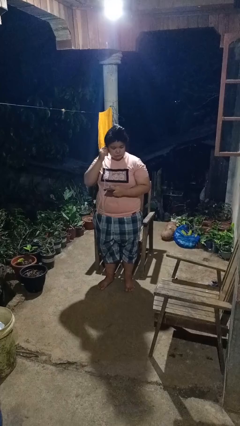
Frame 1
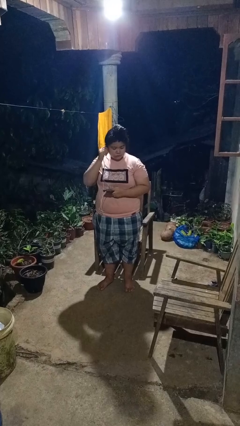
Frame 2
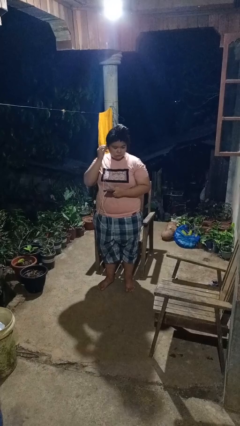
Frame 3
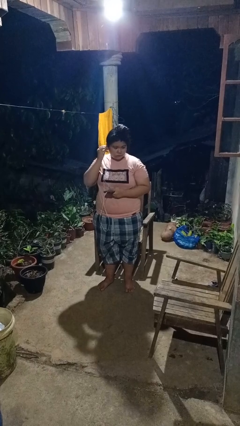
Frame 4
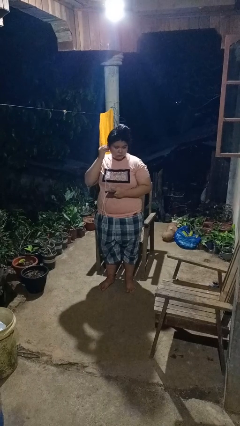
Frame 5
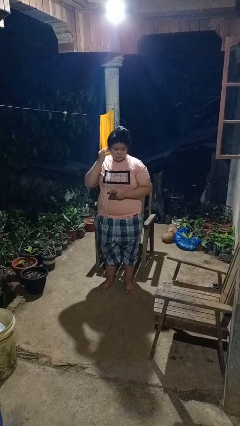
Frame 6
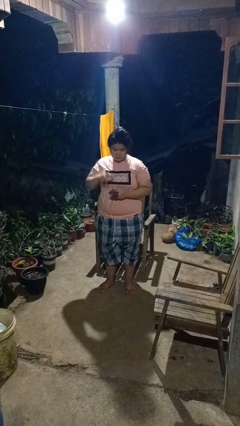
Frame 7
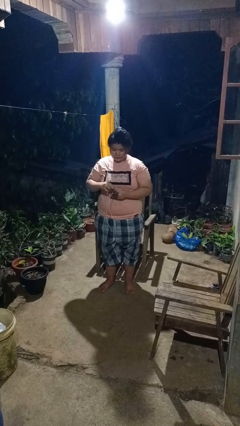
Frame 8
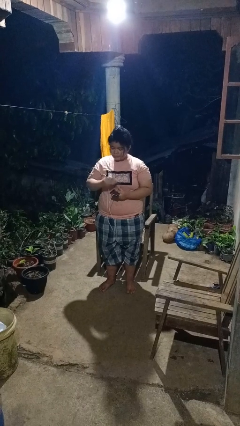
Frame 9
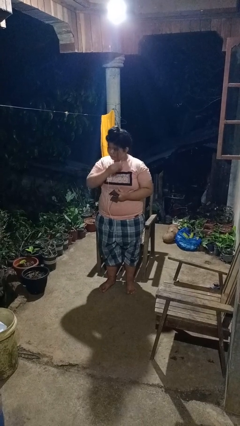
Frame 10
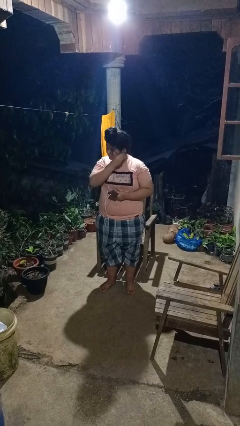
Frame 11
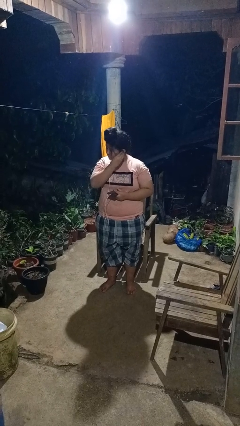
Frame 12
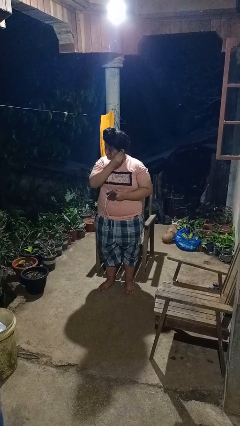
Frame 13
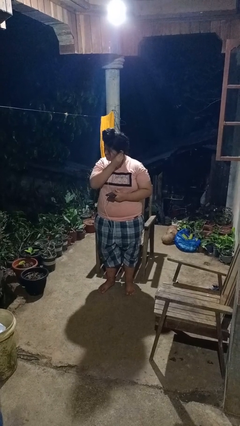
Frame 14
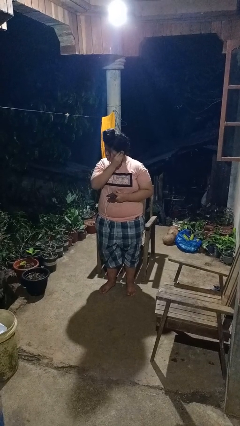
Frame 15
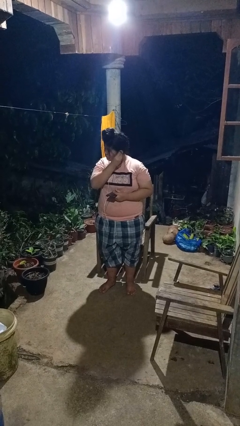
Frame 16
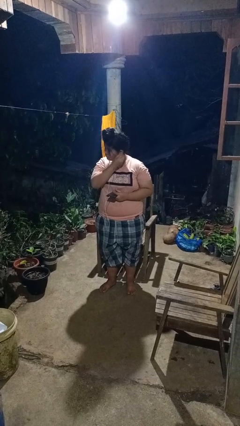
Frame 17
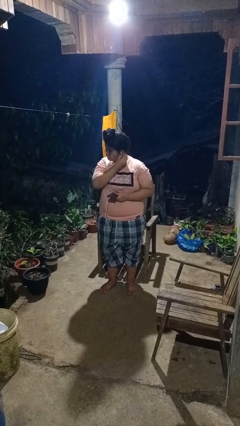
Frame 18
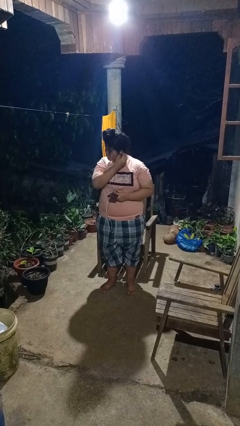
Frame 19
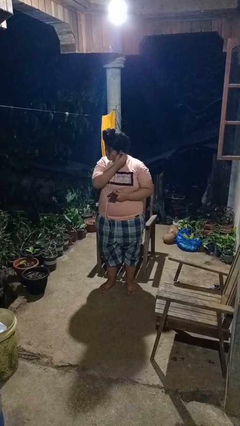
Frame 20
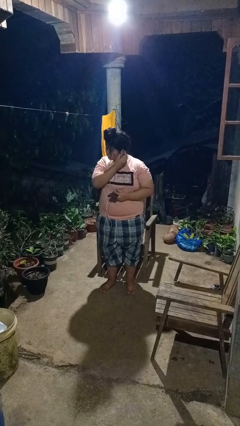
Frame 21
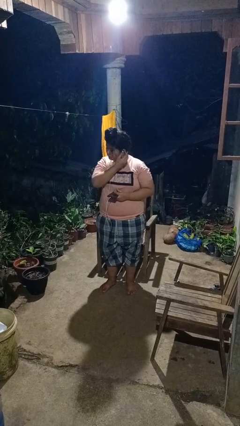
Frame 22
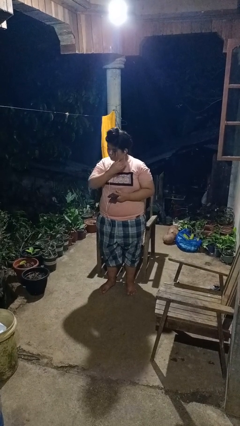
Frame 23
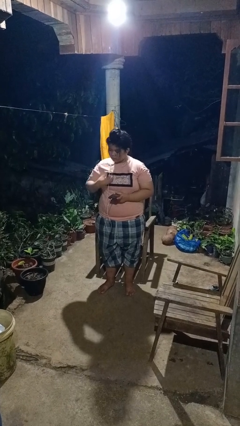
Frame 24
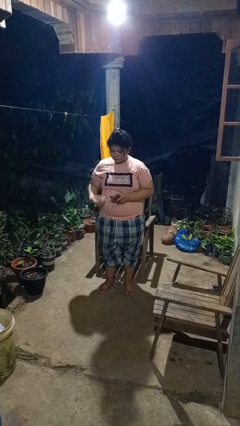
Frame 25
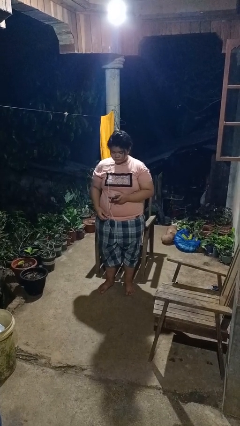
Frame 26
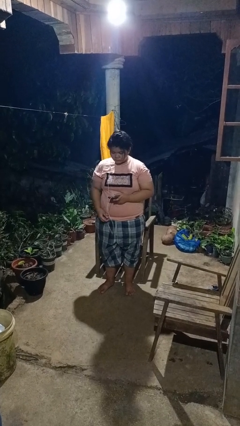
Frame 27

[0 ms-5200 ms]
person puts on headphones

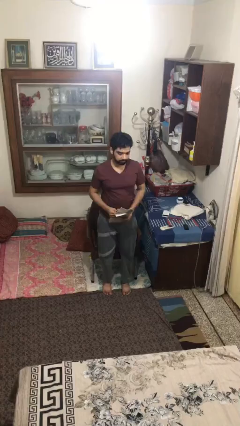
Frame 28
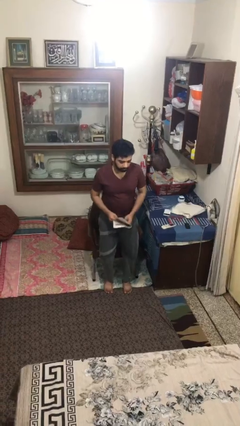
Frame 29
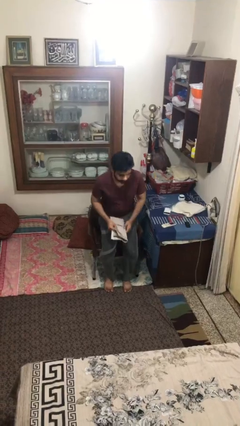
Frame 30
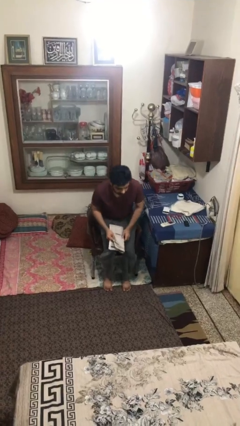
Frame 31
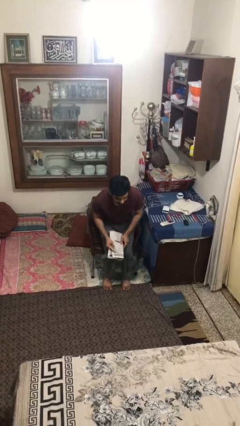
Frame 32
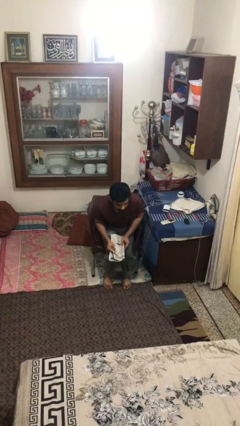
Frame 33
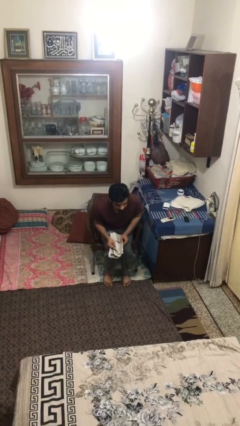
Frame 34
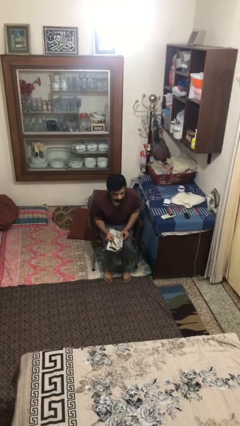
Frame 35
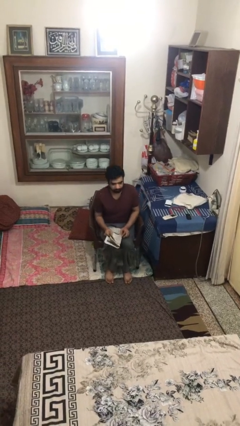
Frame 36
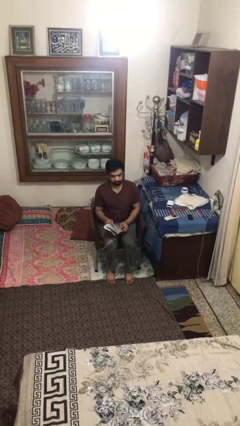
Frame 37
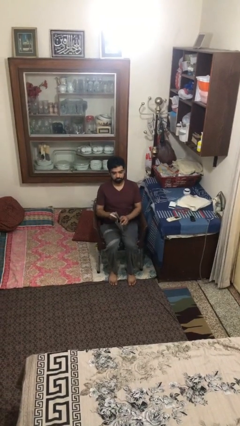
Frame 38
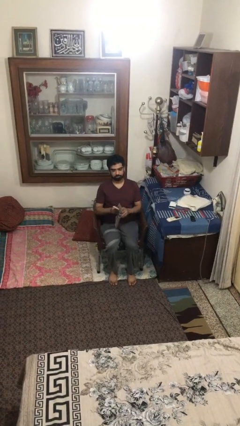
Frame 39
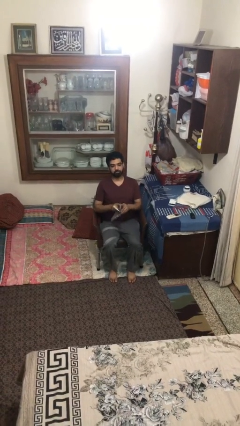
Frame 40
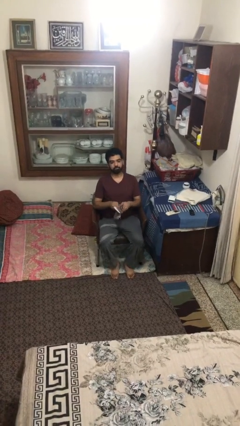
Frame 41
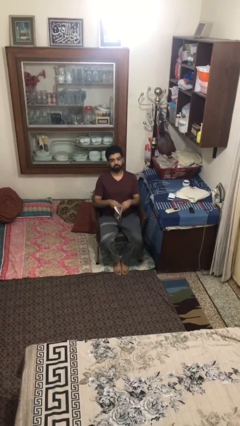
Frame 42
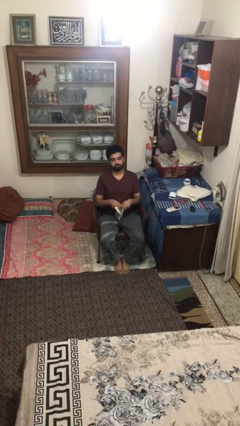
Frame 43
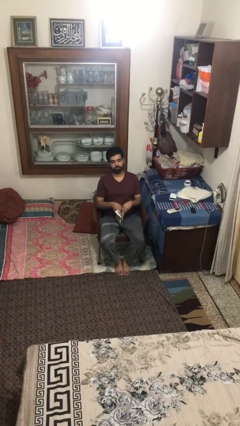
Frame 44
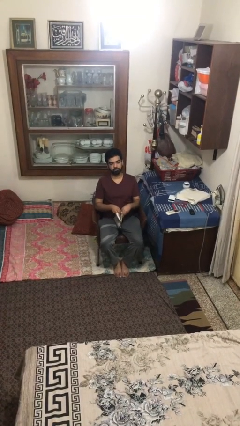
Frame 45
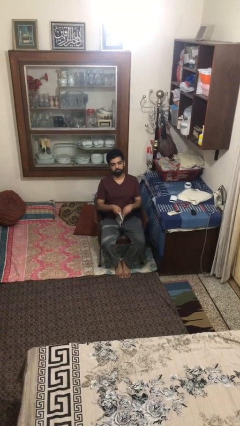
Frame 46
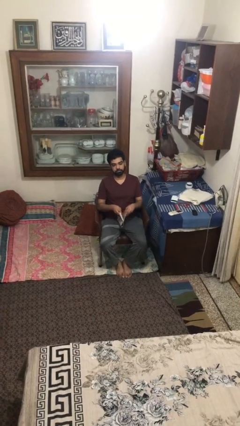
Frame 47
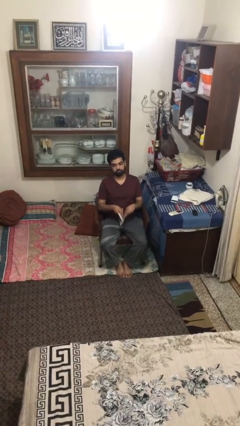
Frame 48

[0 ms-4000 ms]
person sits down

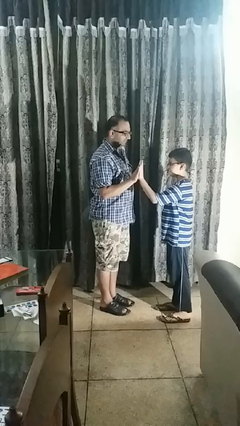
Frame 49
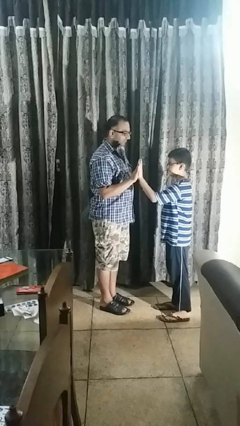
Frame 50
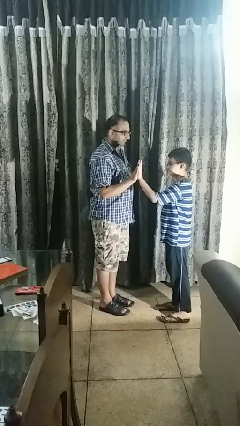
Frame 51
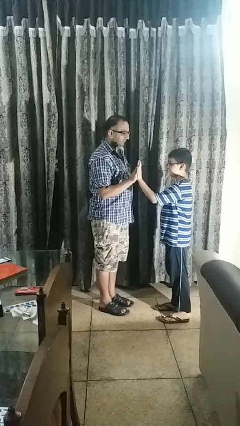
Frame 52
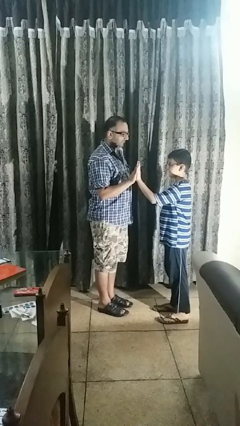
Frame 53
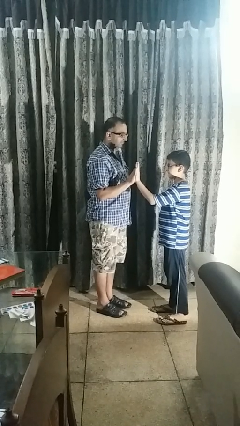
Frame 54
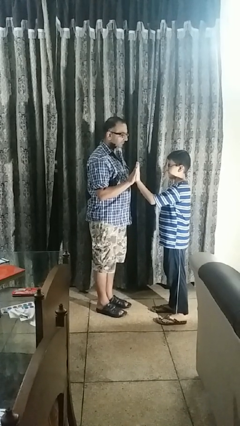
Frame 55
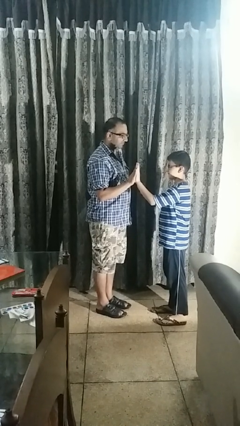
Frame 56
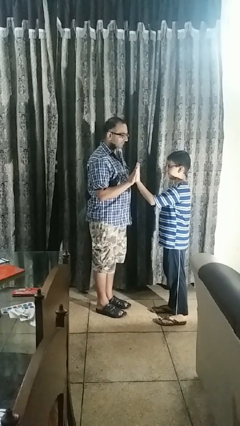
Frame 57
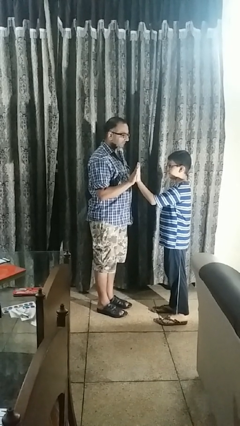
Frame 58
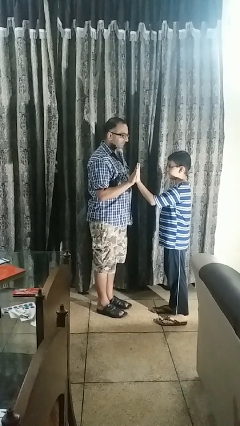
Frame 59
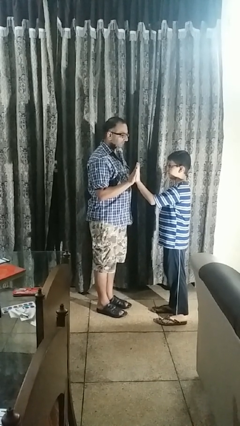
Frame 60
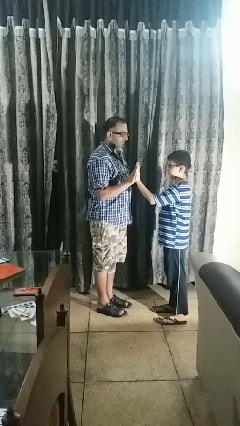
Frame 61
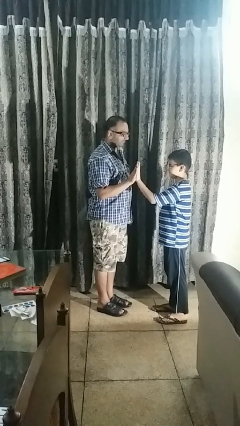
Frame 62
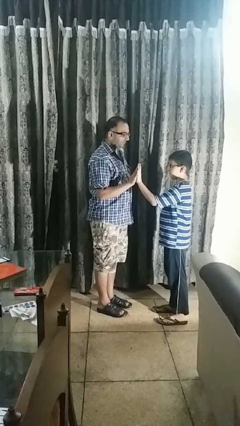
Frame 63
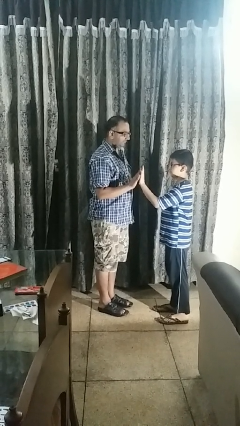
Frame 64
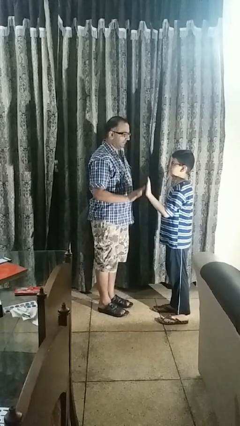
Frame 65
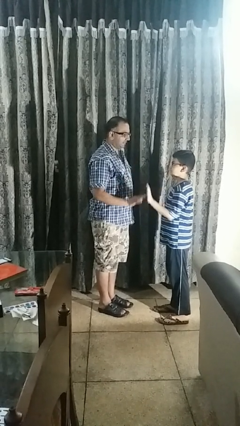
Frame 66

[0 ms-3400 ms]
person highfives hand

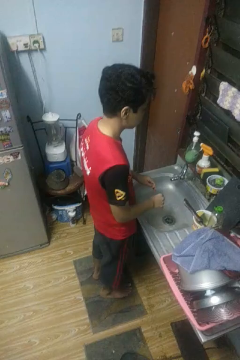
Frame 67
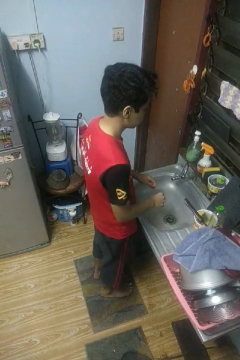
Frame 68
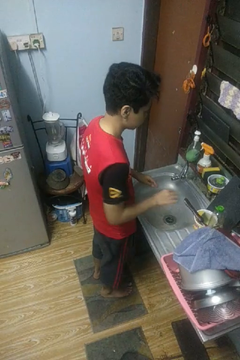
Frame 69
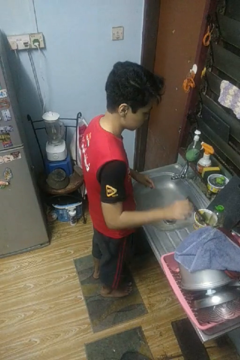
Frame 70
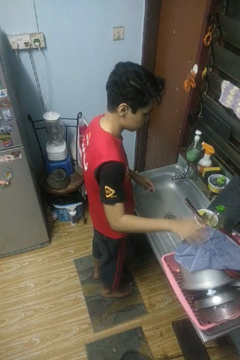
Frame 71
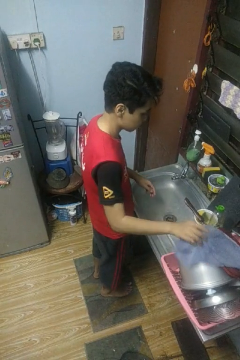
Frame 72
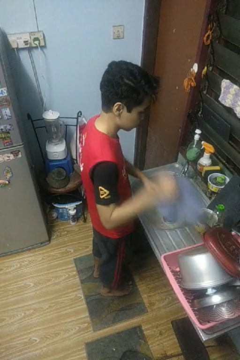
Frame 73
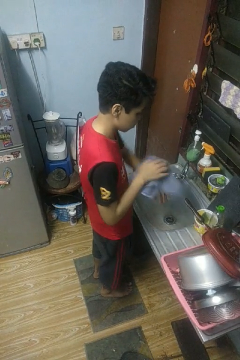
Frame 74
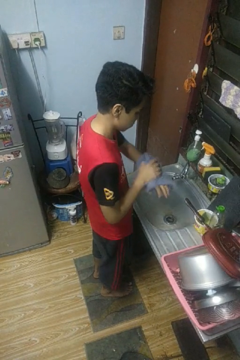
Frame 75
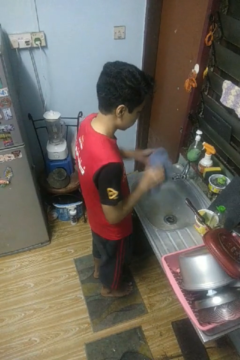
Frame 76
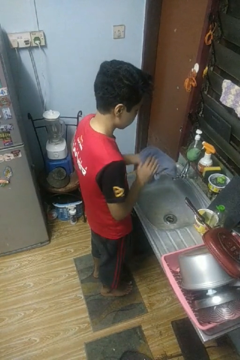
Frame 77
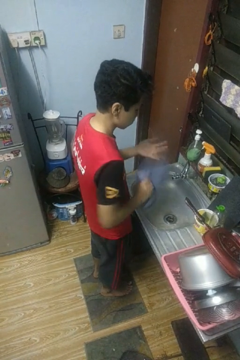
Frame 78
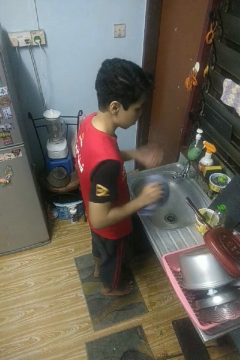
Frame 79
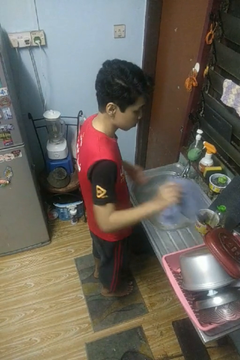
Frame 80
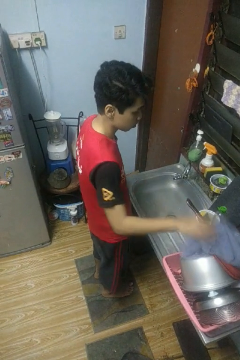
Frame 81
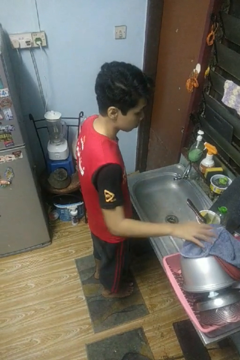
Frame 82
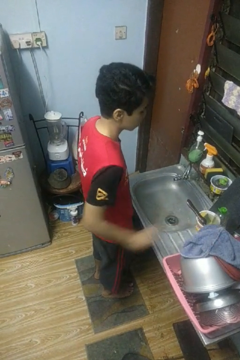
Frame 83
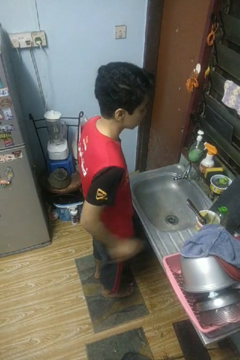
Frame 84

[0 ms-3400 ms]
person dries hands with towel

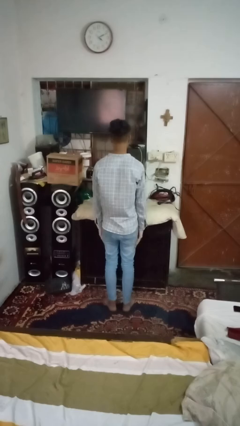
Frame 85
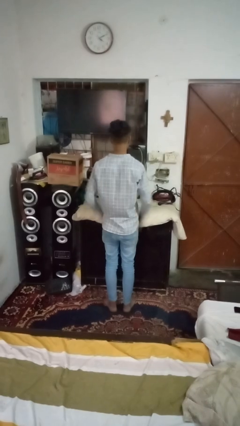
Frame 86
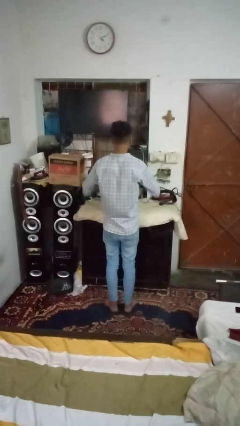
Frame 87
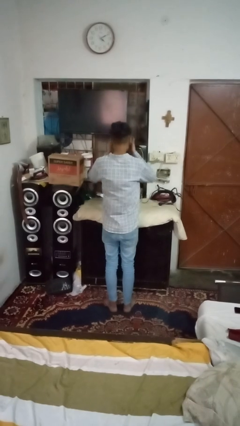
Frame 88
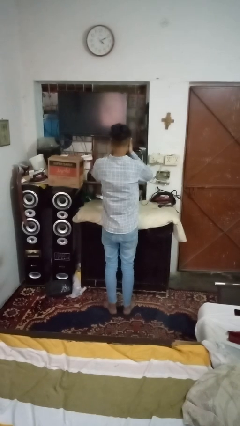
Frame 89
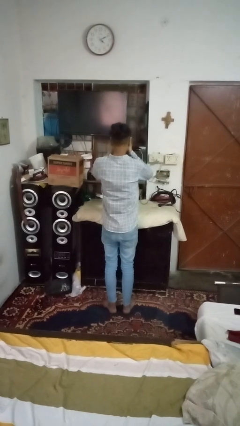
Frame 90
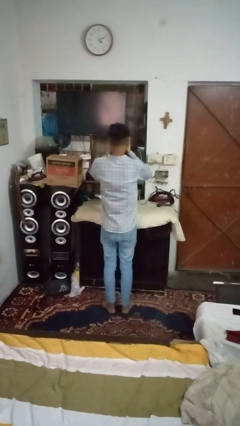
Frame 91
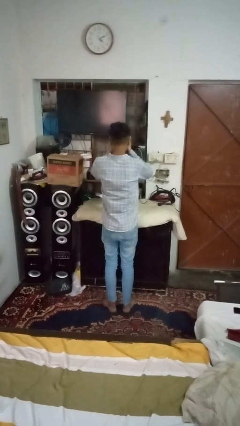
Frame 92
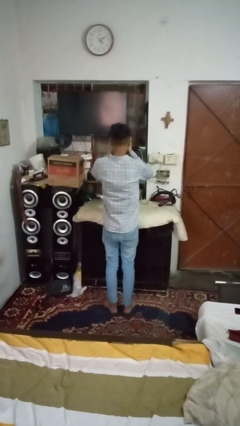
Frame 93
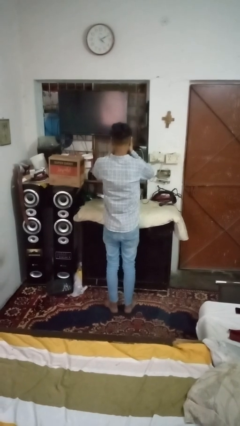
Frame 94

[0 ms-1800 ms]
person covers face with hands

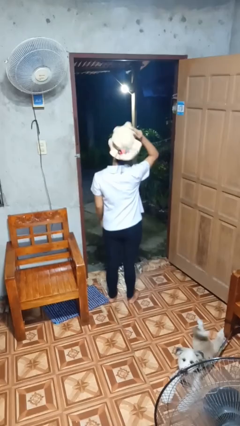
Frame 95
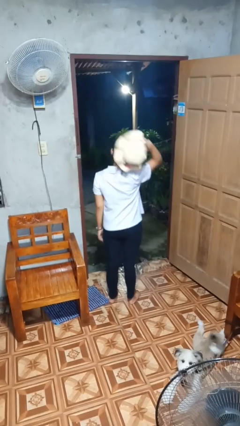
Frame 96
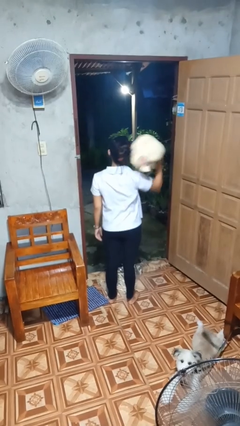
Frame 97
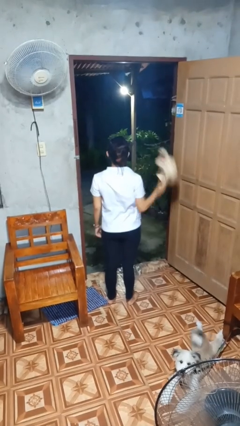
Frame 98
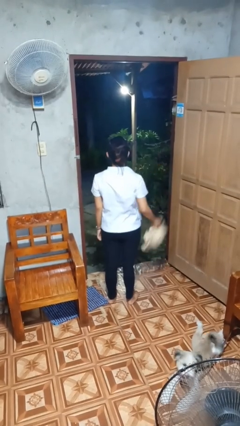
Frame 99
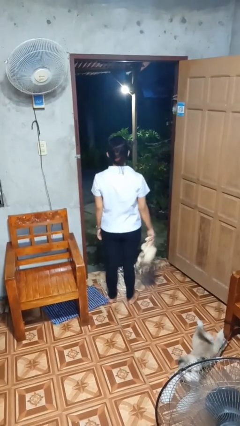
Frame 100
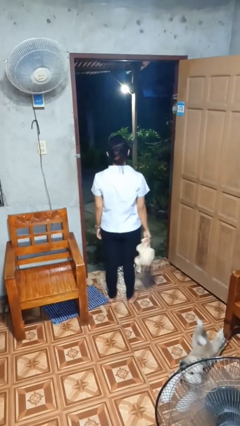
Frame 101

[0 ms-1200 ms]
person takes off hat
